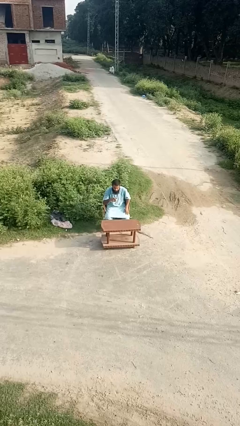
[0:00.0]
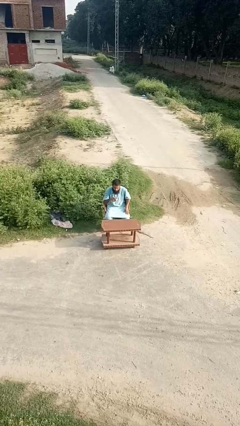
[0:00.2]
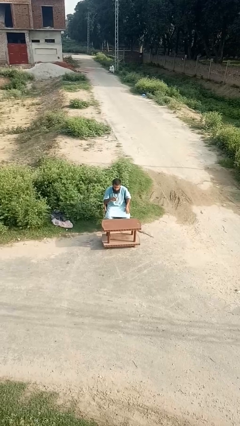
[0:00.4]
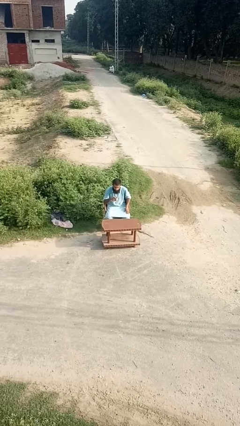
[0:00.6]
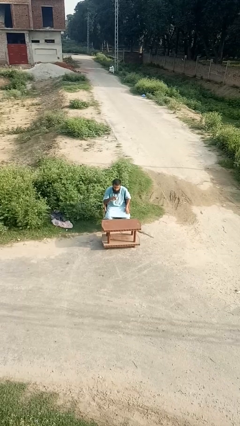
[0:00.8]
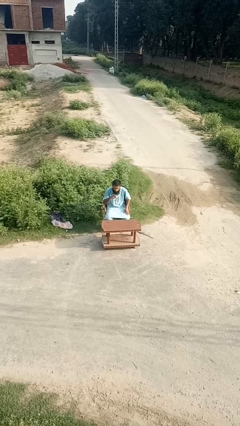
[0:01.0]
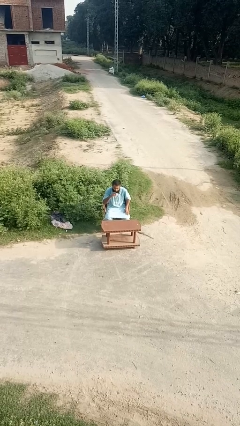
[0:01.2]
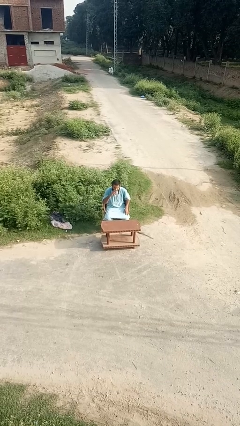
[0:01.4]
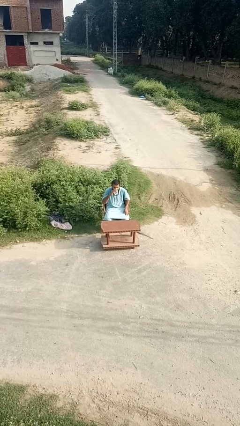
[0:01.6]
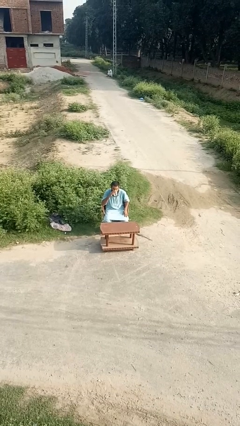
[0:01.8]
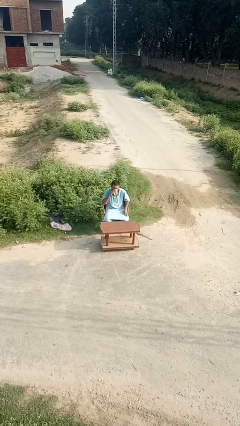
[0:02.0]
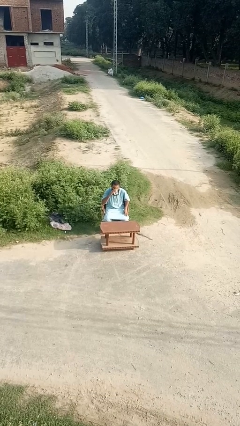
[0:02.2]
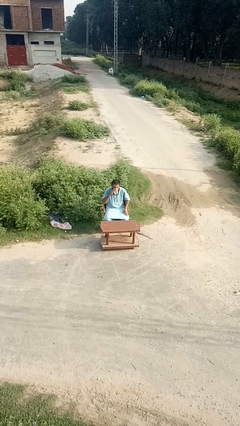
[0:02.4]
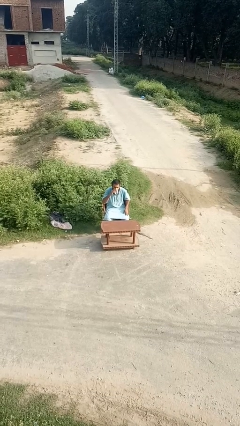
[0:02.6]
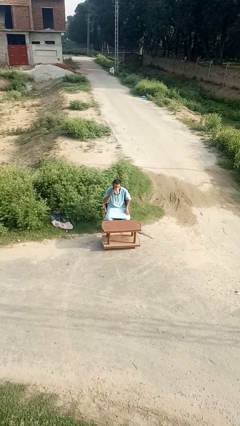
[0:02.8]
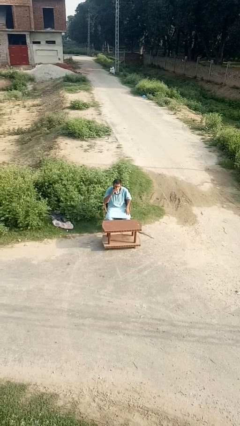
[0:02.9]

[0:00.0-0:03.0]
person drinks from mug

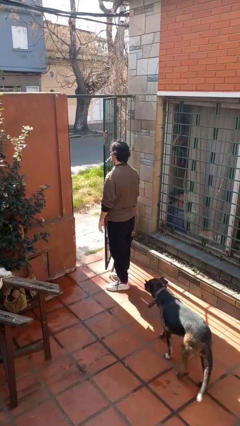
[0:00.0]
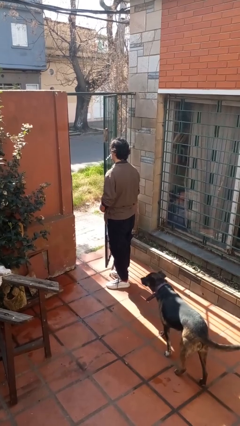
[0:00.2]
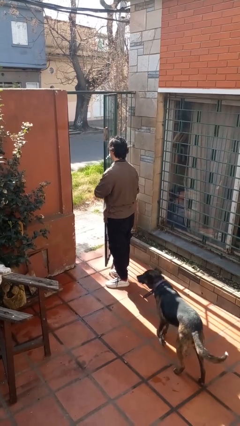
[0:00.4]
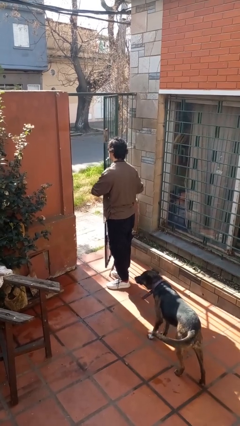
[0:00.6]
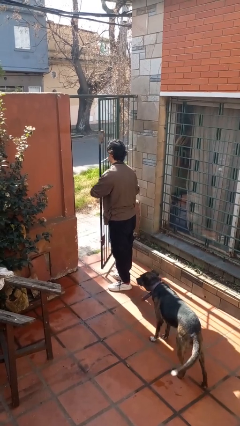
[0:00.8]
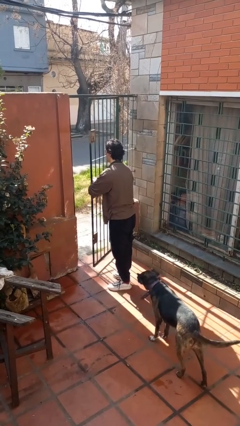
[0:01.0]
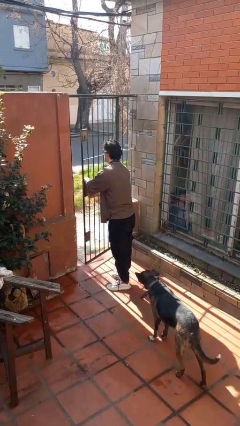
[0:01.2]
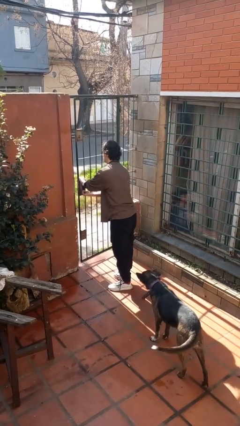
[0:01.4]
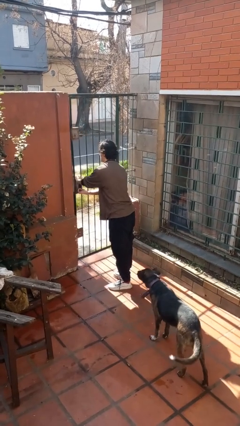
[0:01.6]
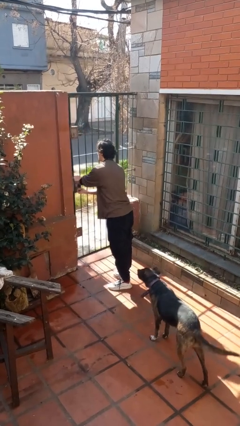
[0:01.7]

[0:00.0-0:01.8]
person closes gate

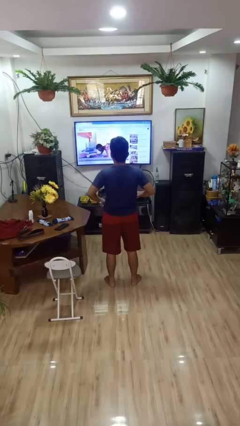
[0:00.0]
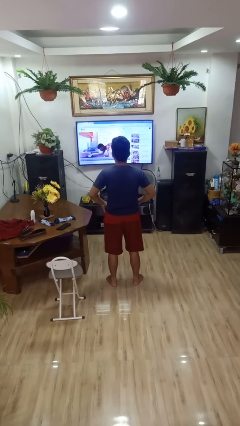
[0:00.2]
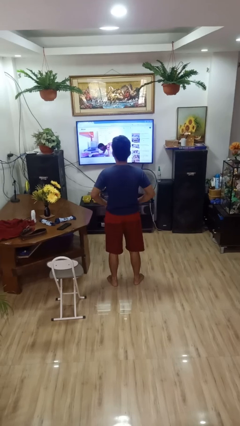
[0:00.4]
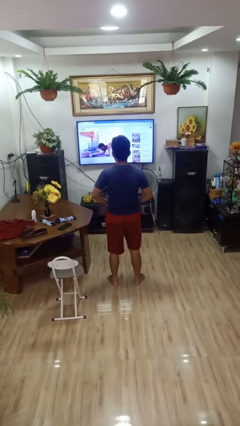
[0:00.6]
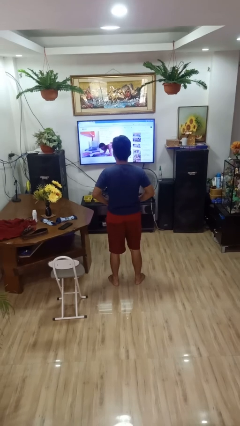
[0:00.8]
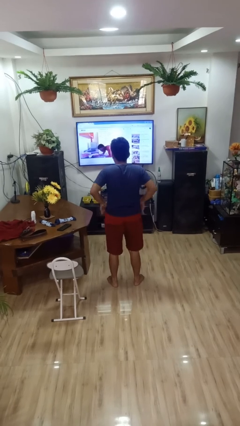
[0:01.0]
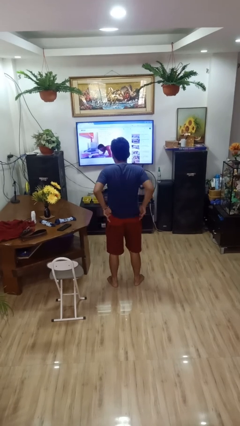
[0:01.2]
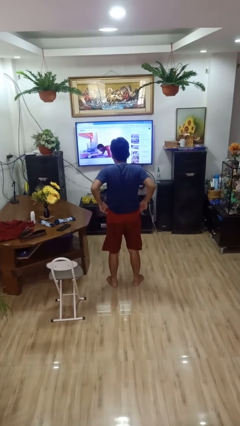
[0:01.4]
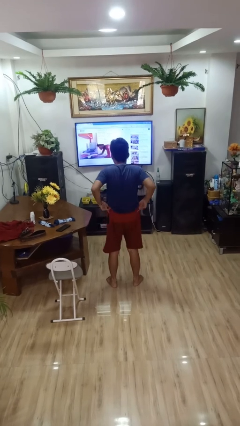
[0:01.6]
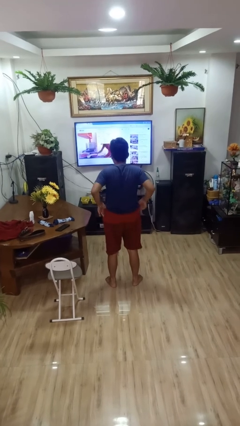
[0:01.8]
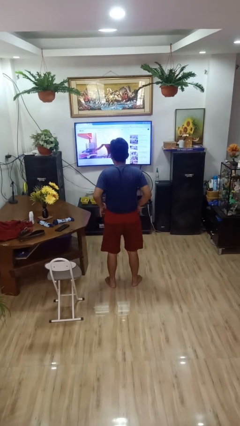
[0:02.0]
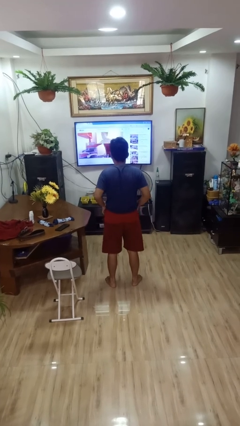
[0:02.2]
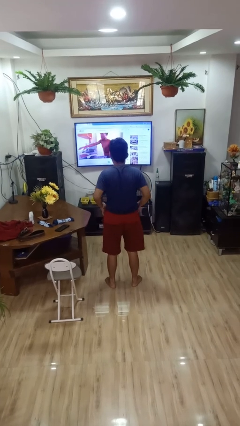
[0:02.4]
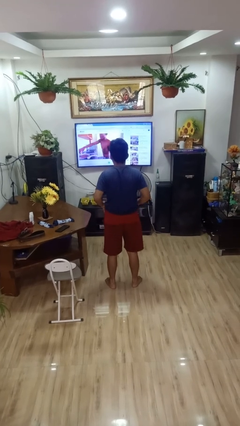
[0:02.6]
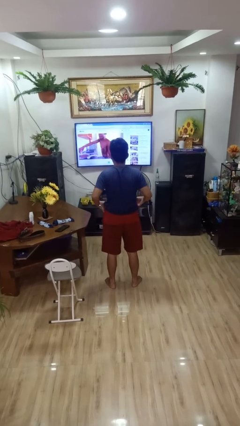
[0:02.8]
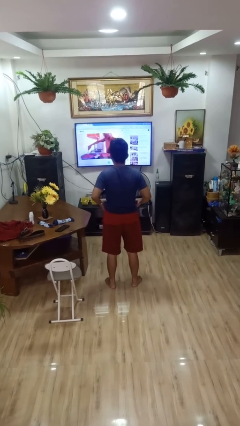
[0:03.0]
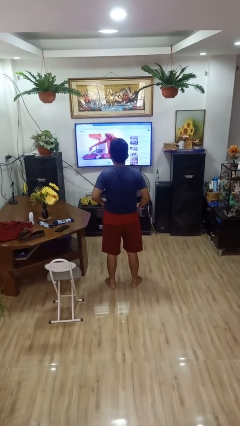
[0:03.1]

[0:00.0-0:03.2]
person hikes up pants

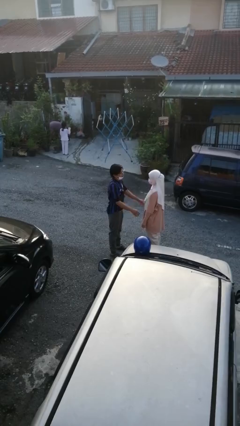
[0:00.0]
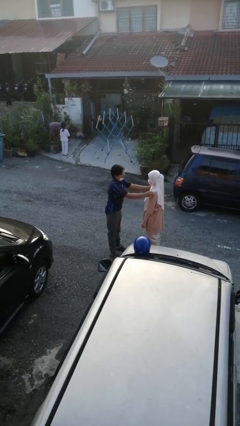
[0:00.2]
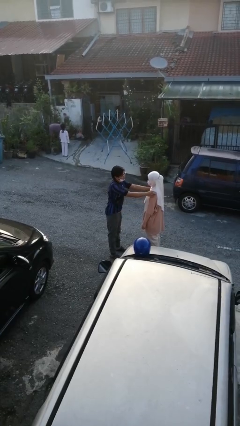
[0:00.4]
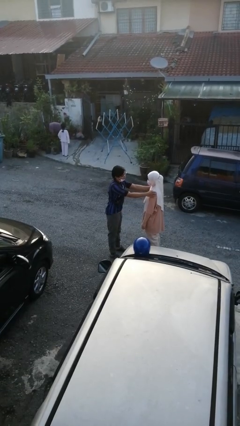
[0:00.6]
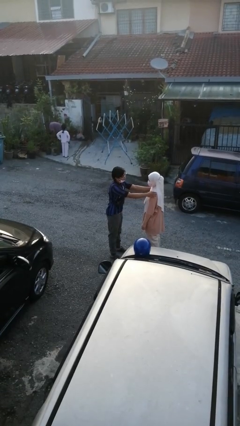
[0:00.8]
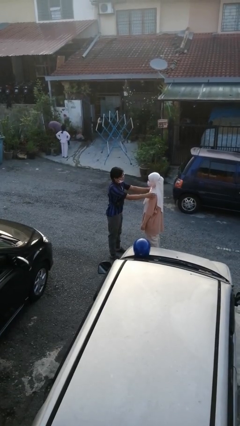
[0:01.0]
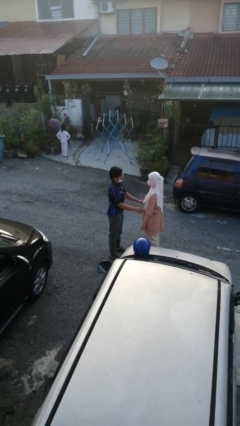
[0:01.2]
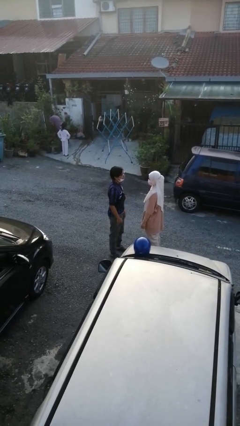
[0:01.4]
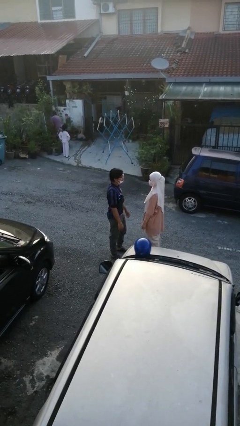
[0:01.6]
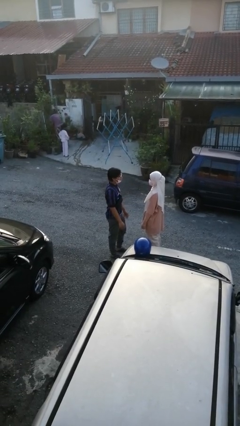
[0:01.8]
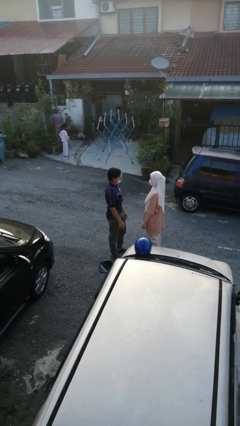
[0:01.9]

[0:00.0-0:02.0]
person pounds shoulders of person

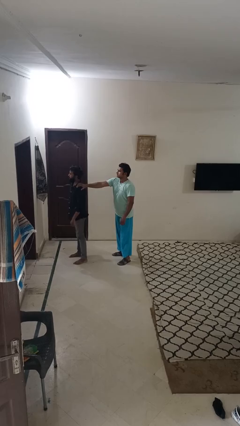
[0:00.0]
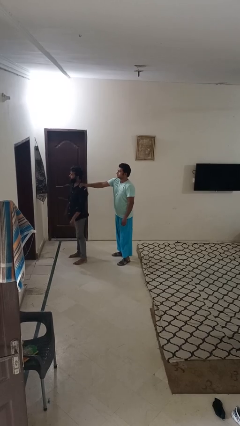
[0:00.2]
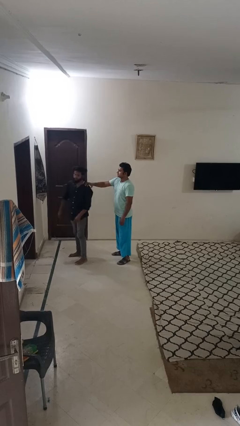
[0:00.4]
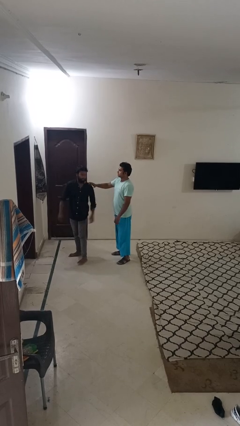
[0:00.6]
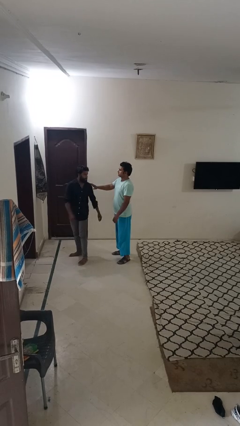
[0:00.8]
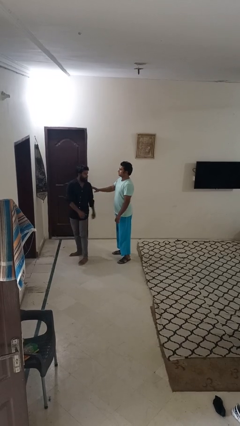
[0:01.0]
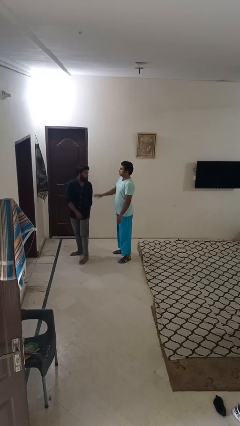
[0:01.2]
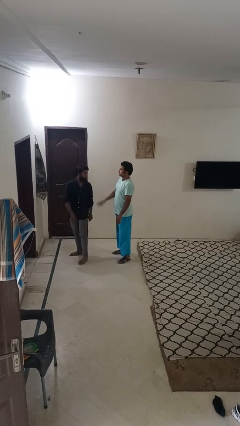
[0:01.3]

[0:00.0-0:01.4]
person spins person around

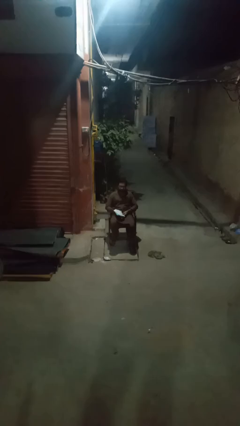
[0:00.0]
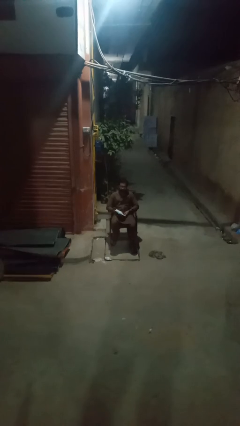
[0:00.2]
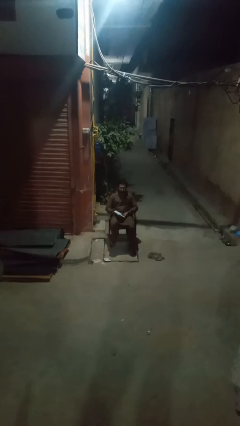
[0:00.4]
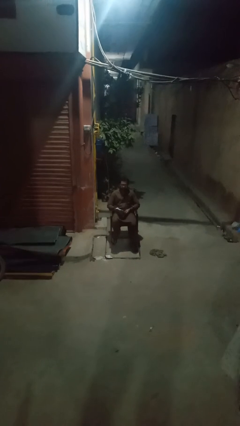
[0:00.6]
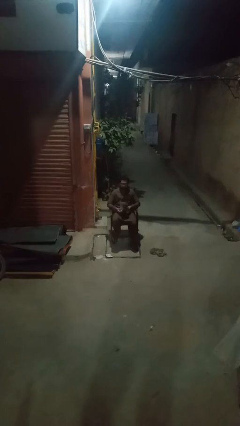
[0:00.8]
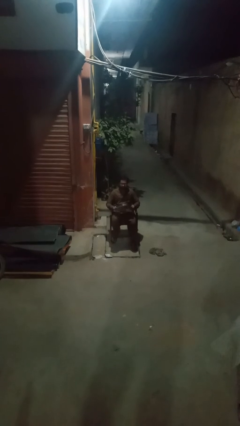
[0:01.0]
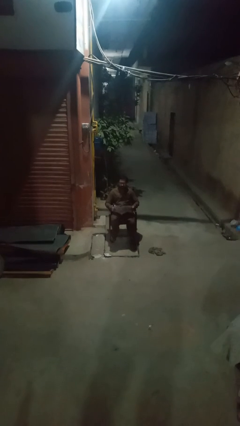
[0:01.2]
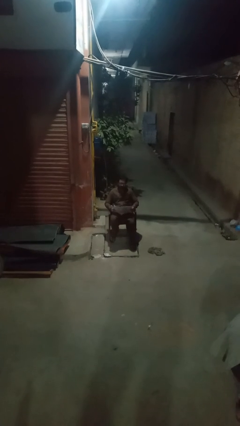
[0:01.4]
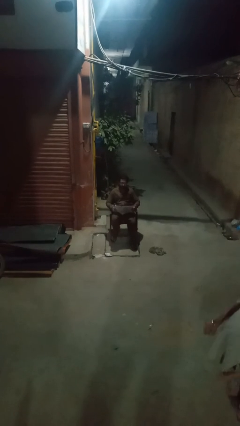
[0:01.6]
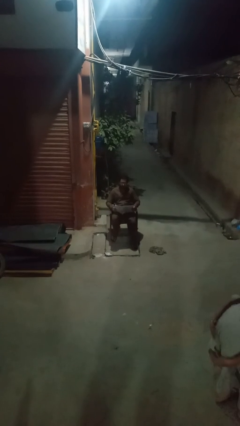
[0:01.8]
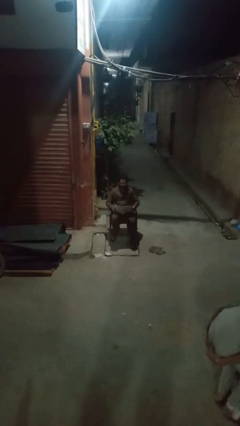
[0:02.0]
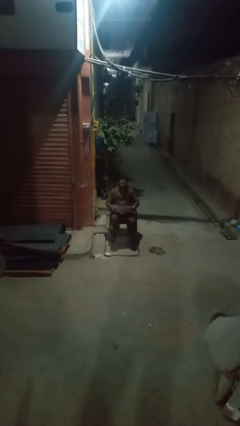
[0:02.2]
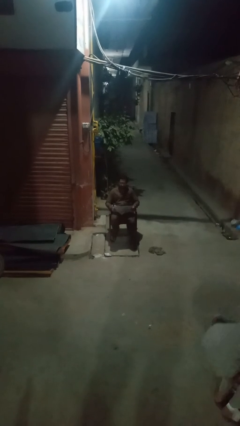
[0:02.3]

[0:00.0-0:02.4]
person reads magazine

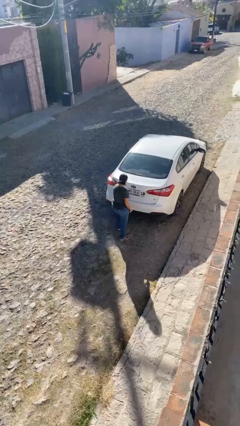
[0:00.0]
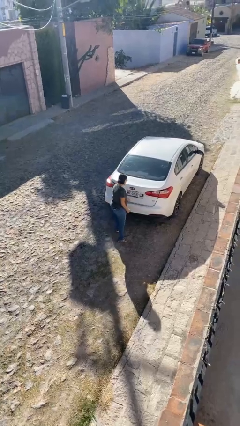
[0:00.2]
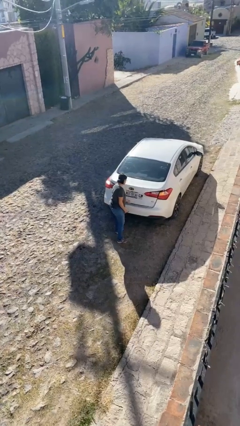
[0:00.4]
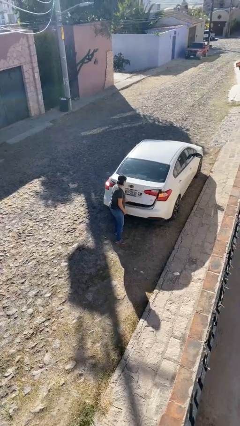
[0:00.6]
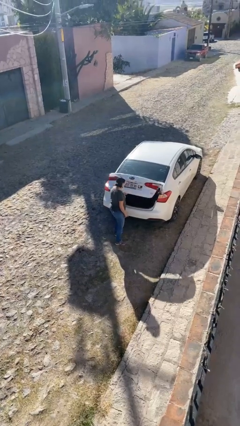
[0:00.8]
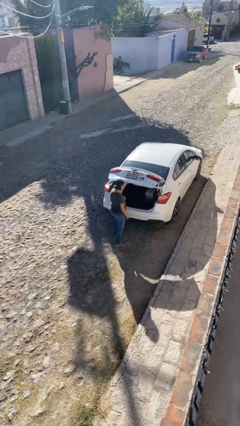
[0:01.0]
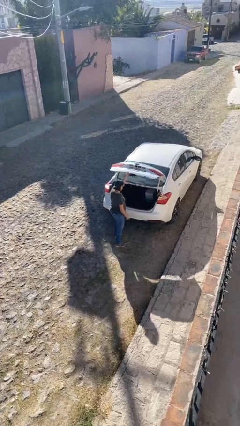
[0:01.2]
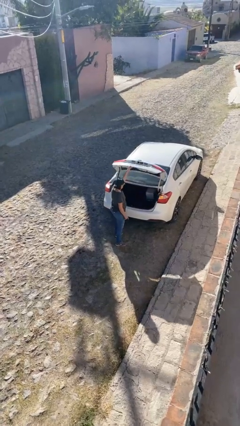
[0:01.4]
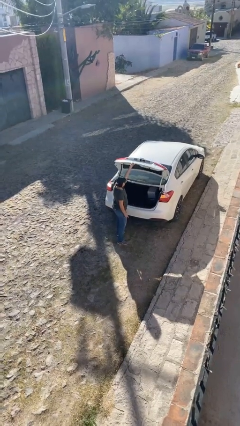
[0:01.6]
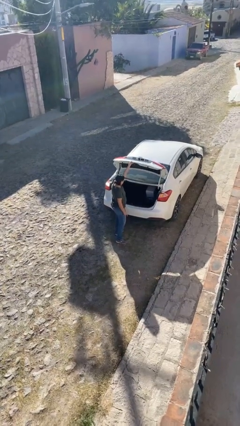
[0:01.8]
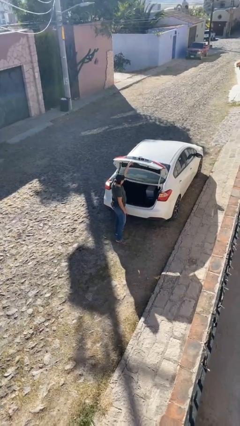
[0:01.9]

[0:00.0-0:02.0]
person opens car trunk

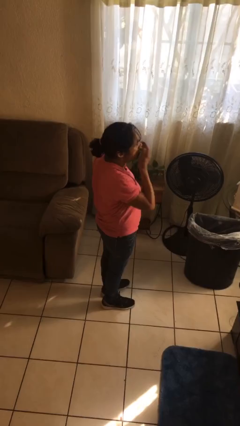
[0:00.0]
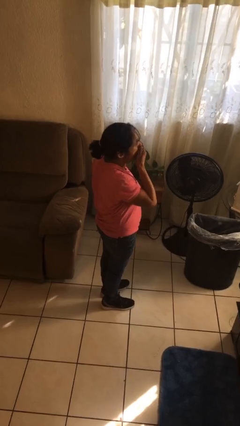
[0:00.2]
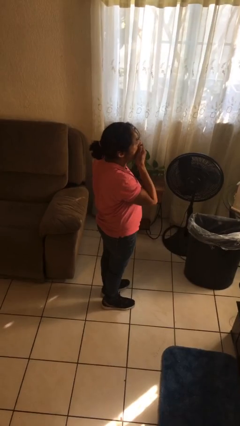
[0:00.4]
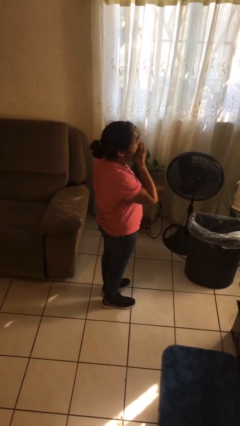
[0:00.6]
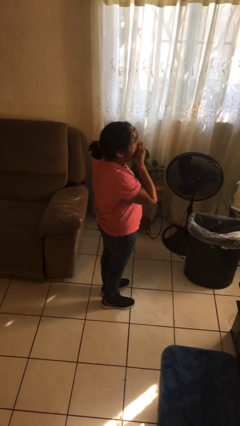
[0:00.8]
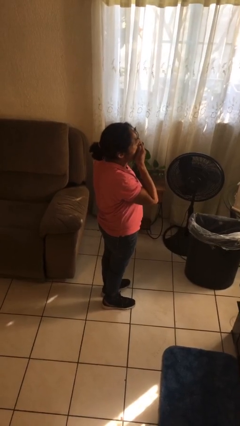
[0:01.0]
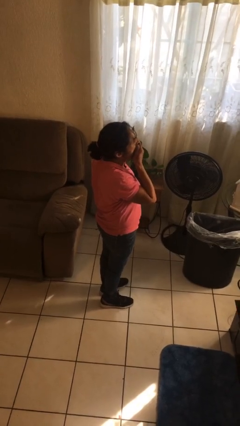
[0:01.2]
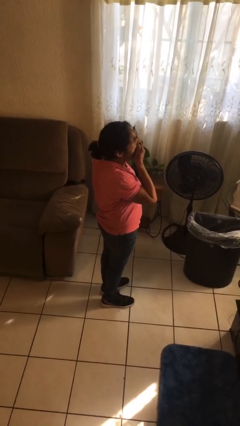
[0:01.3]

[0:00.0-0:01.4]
person yawns

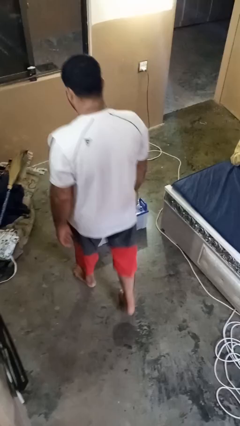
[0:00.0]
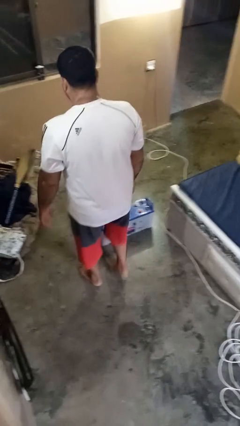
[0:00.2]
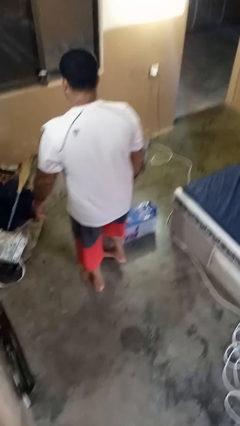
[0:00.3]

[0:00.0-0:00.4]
person stands up from floor
